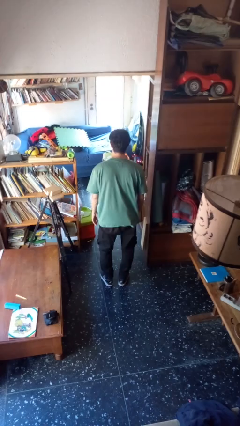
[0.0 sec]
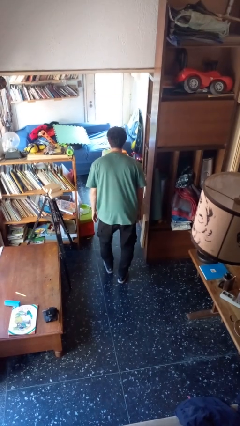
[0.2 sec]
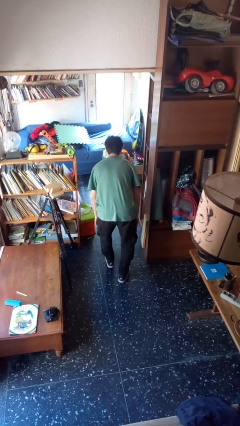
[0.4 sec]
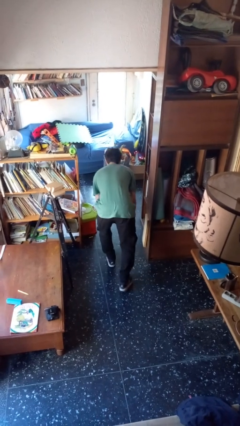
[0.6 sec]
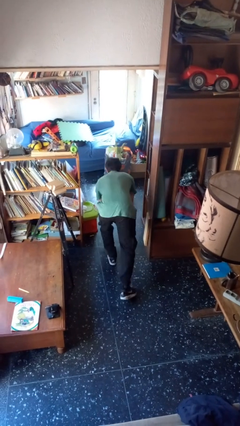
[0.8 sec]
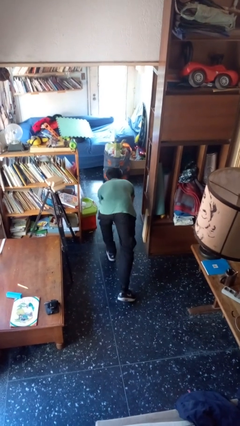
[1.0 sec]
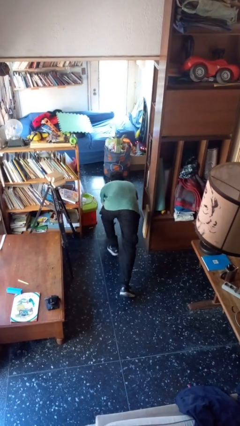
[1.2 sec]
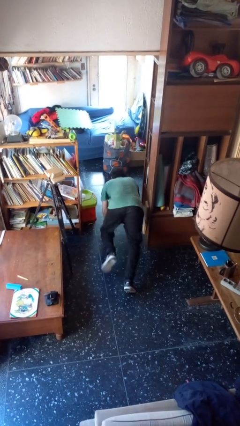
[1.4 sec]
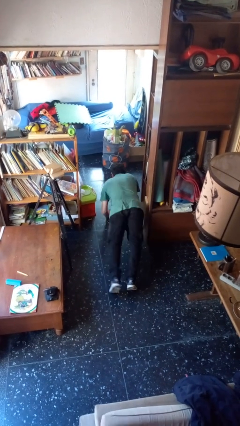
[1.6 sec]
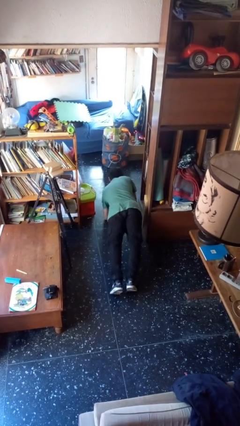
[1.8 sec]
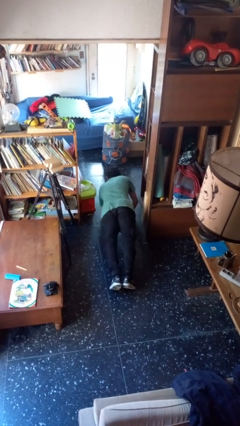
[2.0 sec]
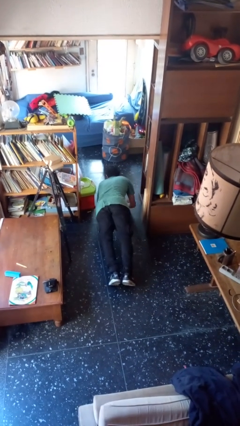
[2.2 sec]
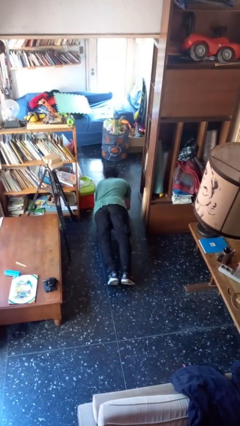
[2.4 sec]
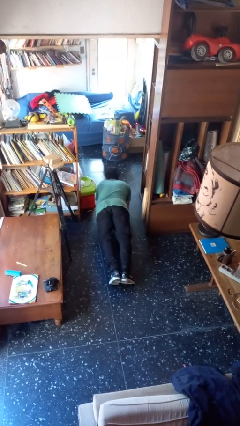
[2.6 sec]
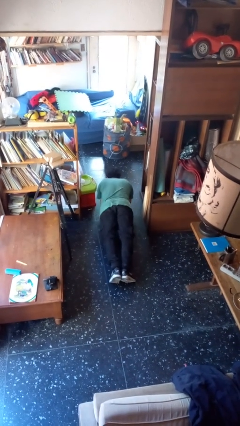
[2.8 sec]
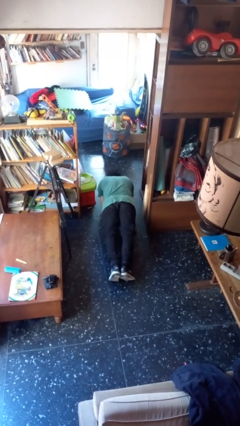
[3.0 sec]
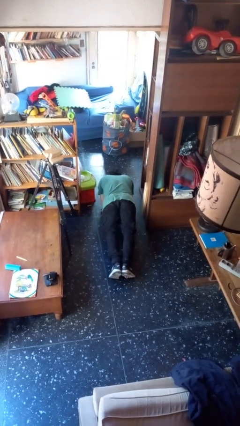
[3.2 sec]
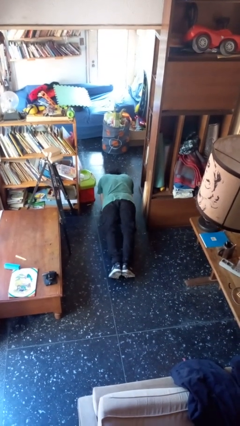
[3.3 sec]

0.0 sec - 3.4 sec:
person exercises with plank

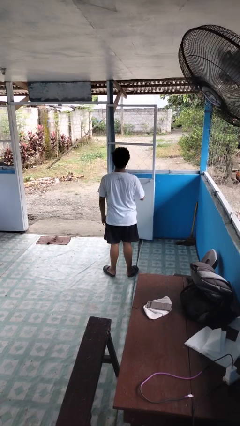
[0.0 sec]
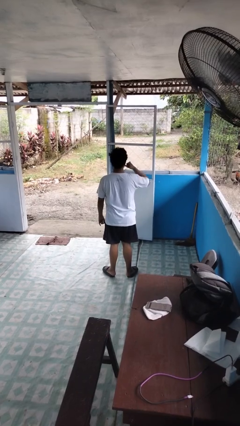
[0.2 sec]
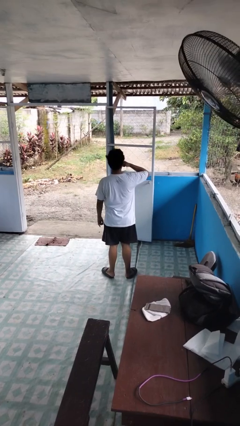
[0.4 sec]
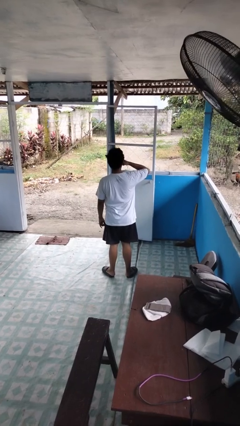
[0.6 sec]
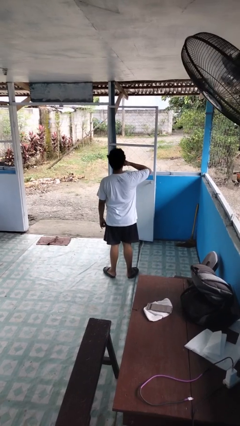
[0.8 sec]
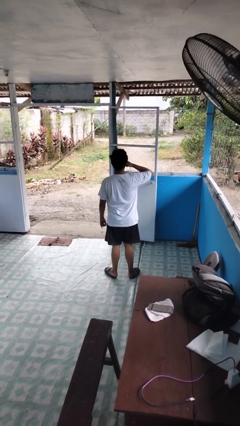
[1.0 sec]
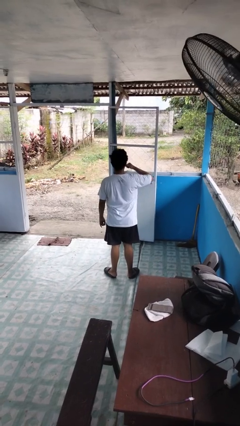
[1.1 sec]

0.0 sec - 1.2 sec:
person gestures call me

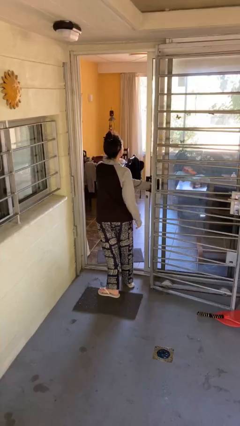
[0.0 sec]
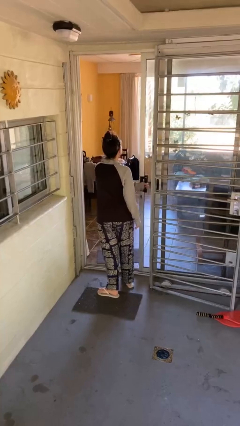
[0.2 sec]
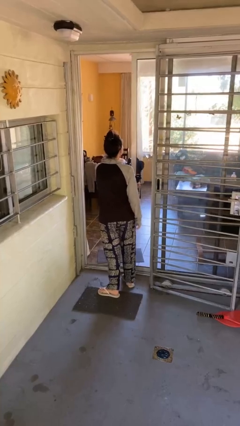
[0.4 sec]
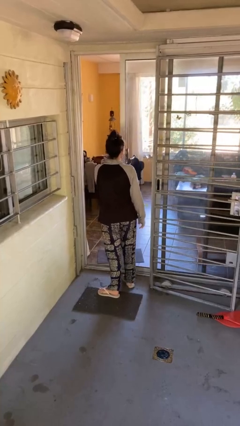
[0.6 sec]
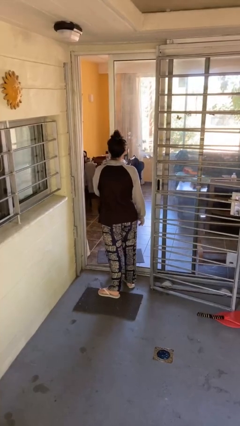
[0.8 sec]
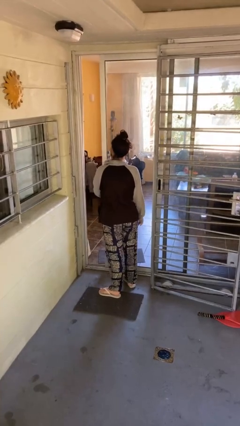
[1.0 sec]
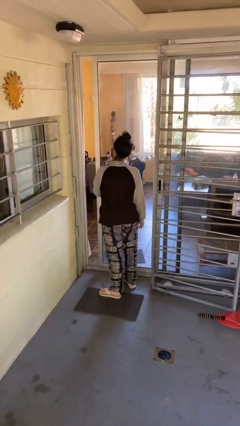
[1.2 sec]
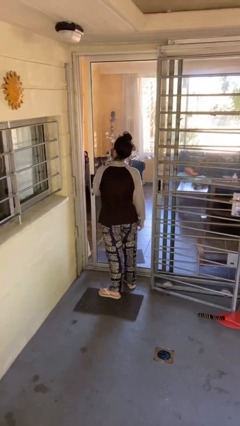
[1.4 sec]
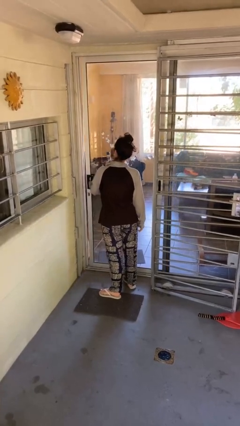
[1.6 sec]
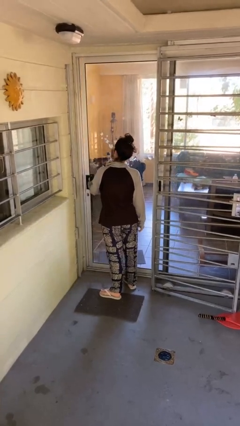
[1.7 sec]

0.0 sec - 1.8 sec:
person closes facility door

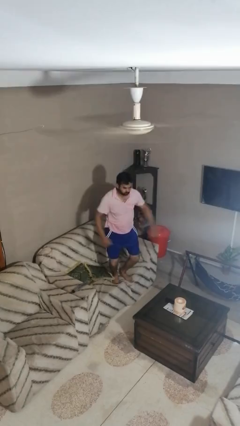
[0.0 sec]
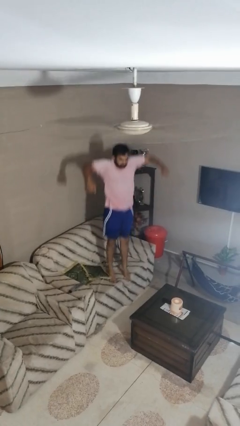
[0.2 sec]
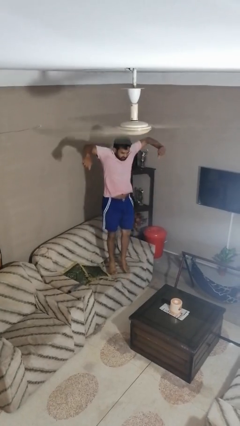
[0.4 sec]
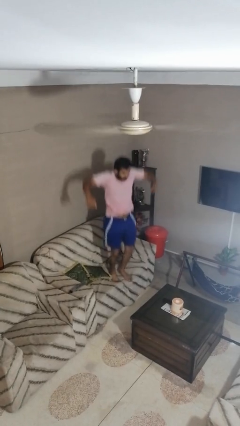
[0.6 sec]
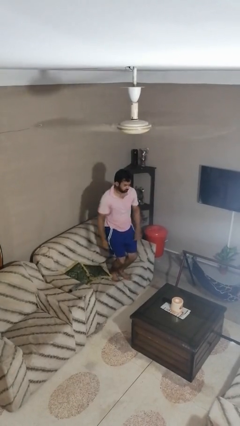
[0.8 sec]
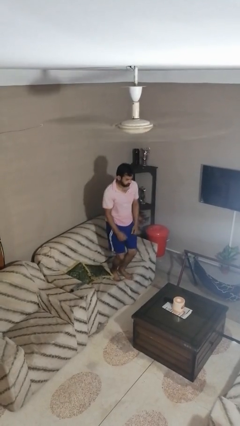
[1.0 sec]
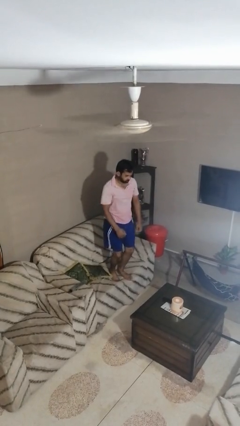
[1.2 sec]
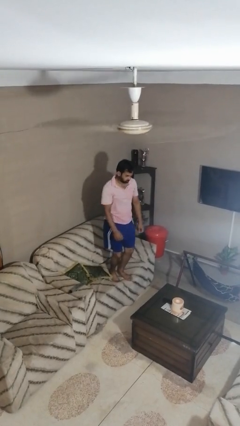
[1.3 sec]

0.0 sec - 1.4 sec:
person jumps on couch

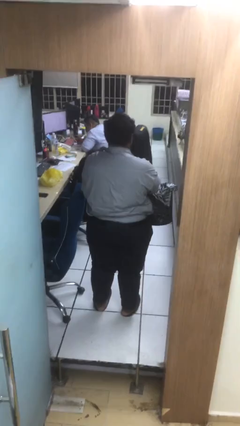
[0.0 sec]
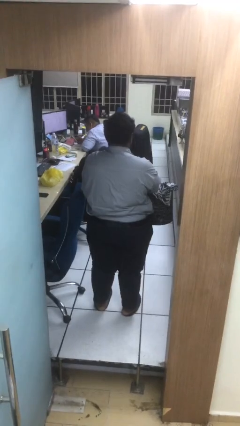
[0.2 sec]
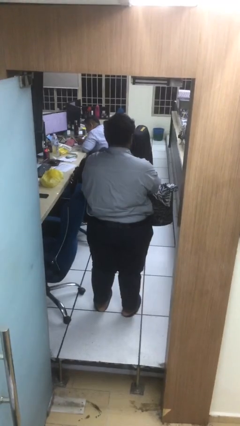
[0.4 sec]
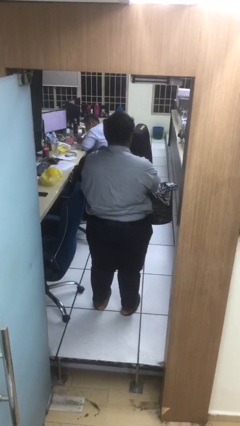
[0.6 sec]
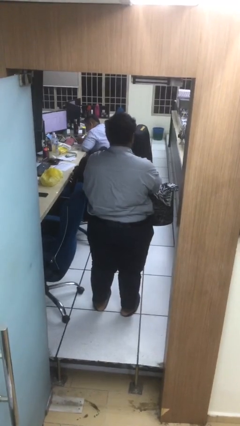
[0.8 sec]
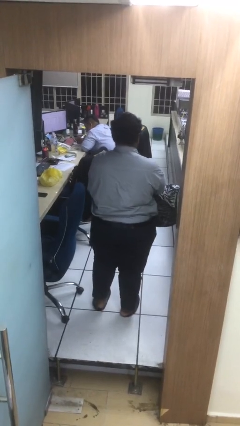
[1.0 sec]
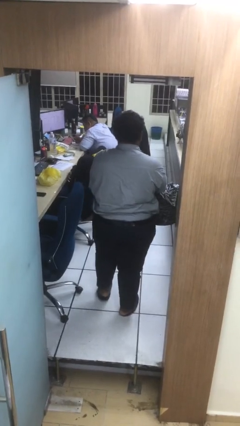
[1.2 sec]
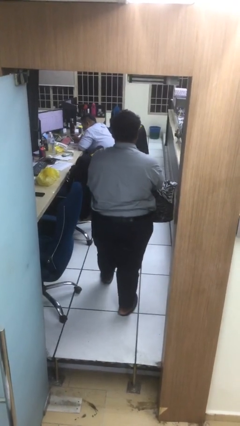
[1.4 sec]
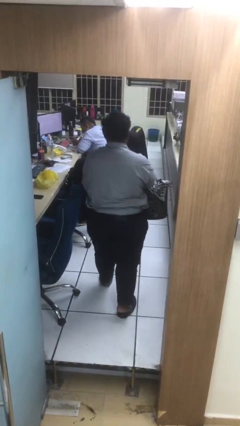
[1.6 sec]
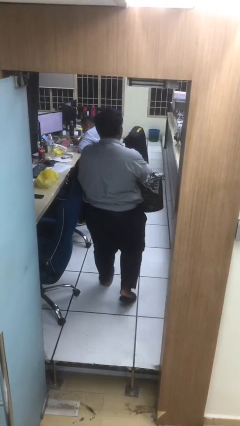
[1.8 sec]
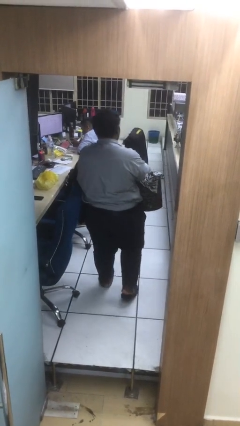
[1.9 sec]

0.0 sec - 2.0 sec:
person carries laundry basket

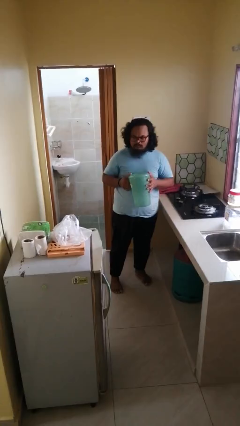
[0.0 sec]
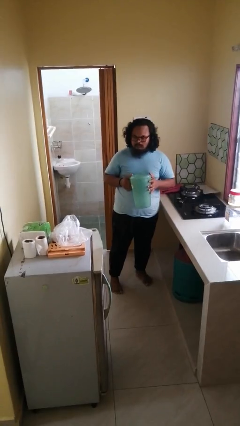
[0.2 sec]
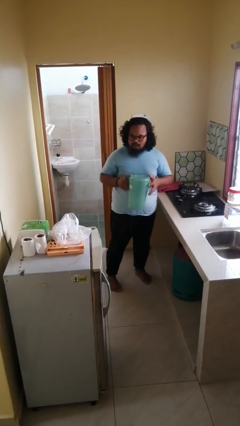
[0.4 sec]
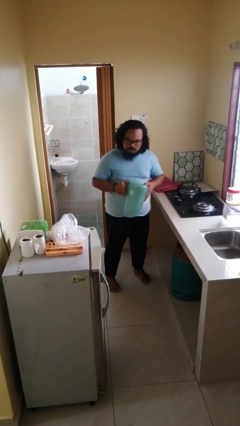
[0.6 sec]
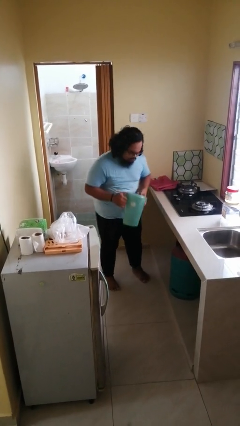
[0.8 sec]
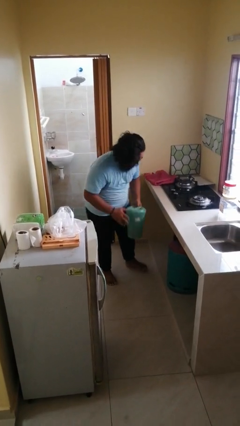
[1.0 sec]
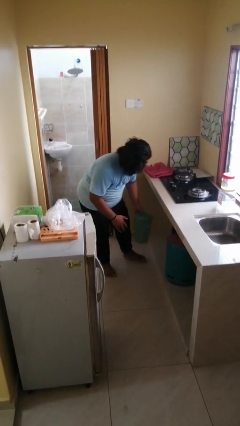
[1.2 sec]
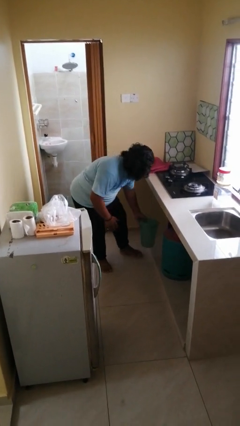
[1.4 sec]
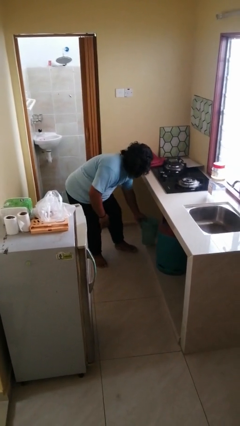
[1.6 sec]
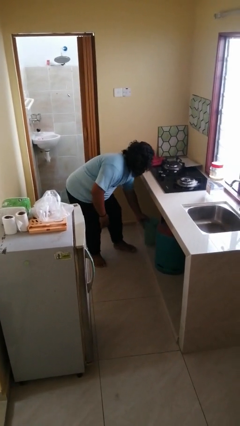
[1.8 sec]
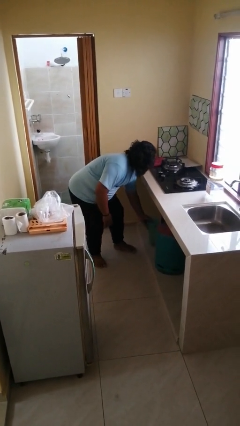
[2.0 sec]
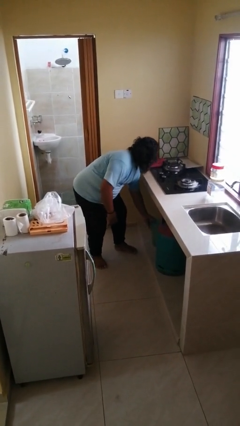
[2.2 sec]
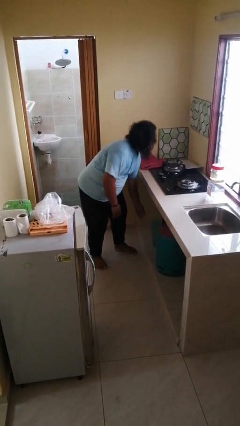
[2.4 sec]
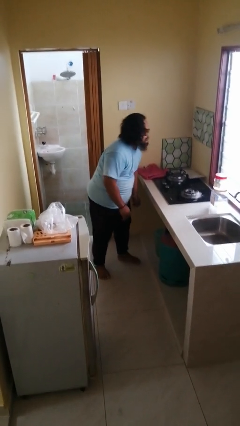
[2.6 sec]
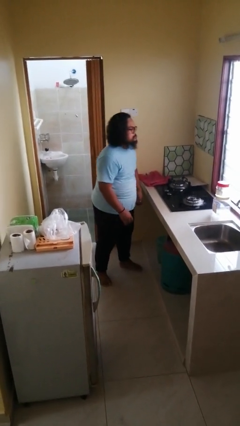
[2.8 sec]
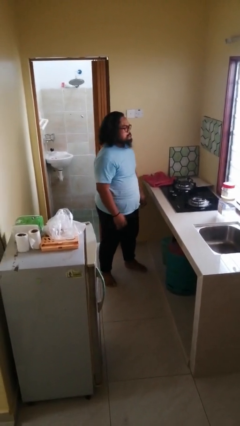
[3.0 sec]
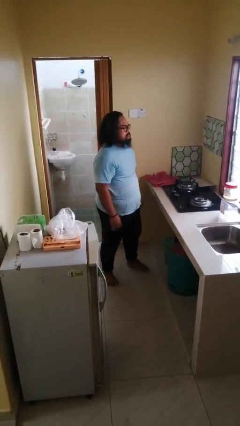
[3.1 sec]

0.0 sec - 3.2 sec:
person puts down object into cabinet

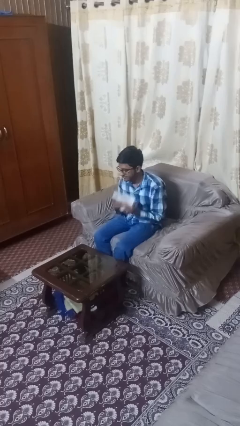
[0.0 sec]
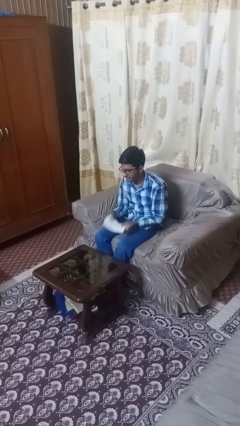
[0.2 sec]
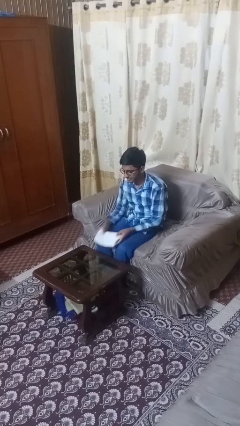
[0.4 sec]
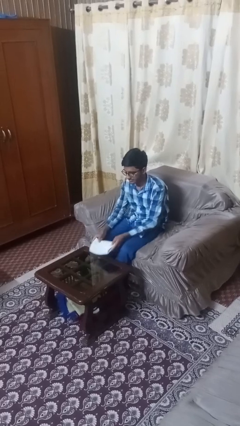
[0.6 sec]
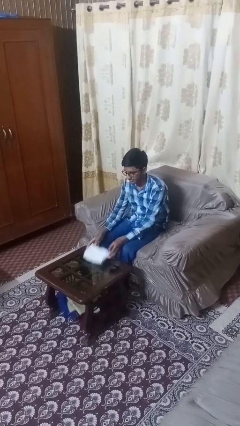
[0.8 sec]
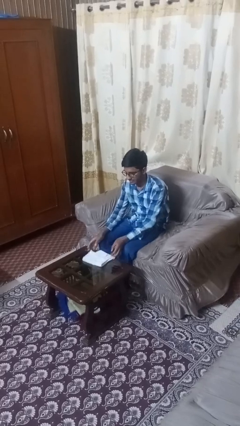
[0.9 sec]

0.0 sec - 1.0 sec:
person wipes mouth with napkin

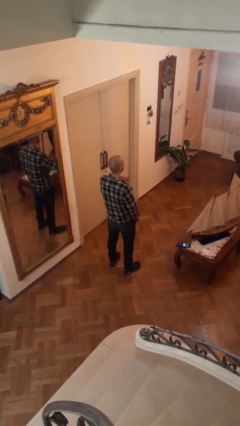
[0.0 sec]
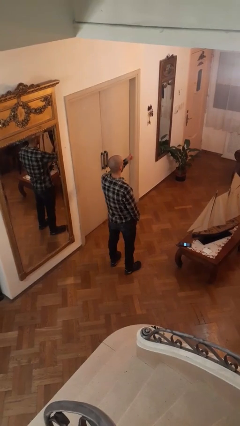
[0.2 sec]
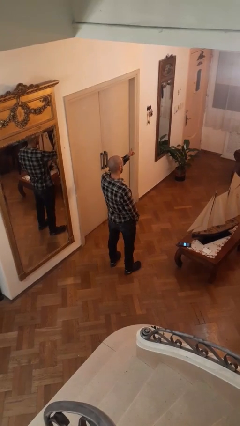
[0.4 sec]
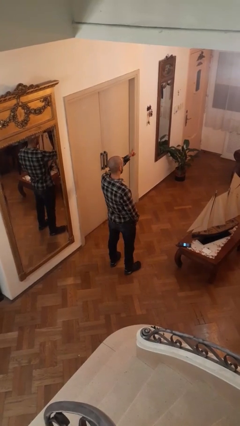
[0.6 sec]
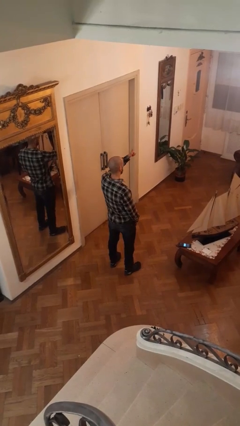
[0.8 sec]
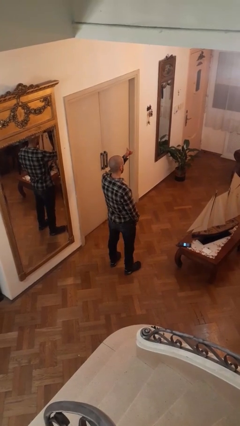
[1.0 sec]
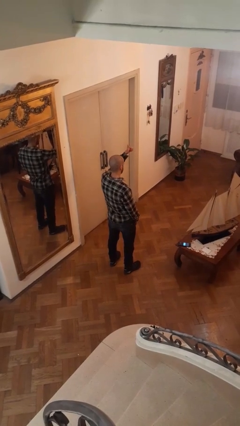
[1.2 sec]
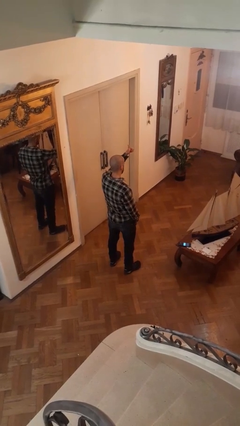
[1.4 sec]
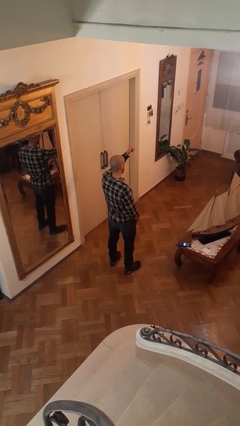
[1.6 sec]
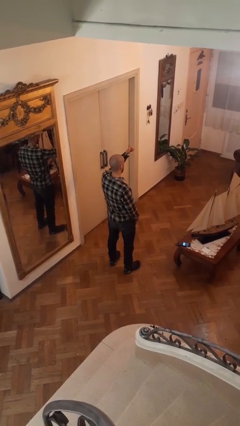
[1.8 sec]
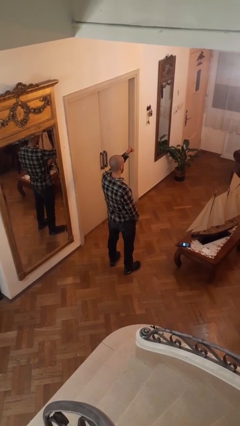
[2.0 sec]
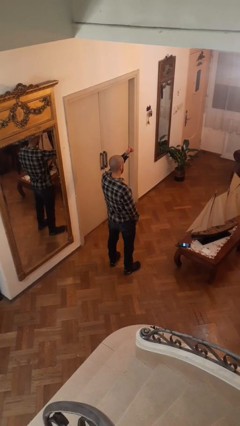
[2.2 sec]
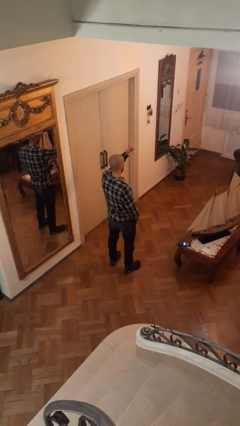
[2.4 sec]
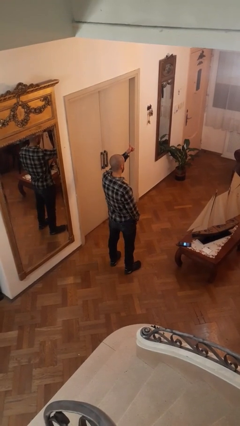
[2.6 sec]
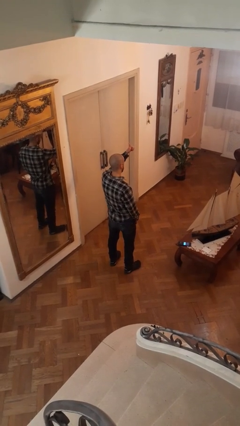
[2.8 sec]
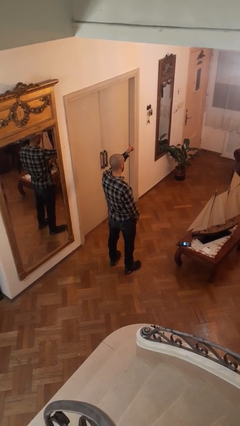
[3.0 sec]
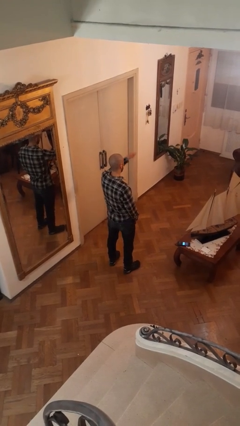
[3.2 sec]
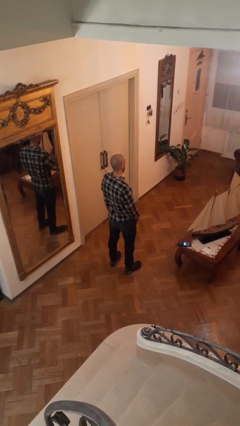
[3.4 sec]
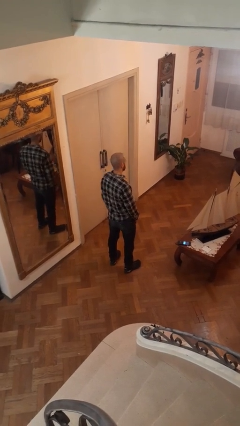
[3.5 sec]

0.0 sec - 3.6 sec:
person gestures thumbs up
